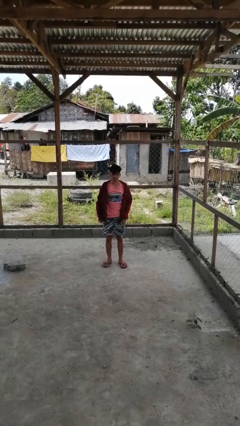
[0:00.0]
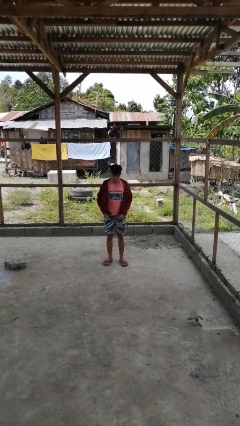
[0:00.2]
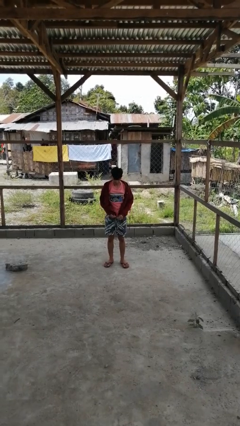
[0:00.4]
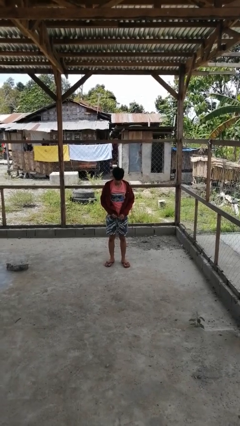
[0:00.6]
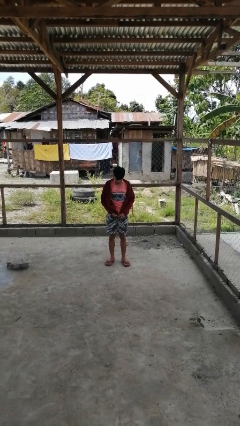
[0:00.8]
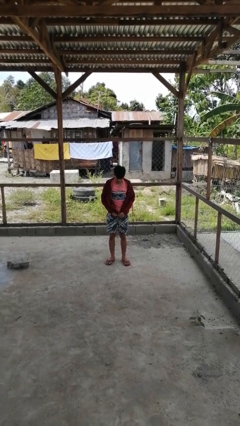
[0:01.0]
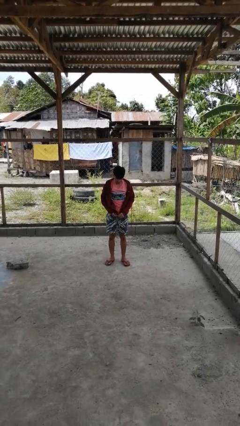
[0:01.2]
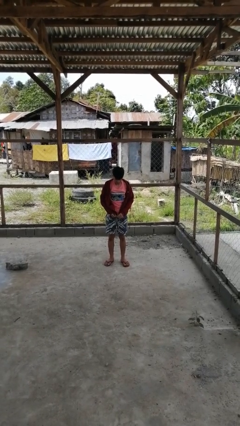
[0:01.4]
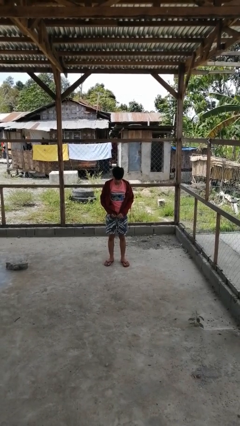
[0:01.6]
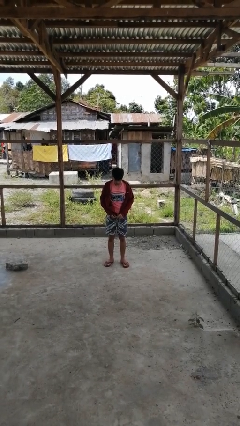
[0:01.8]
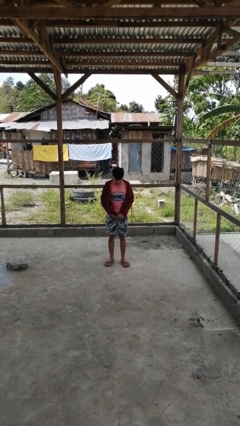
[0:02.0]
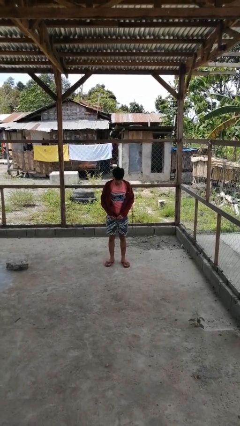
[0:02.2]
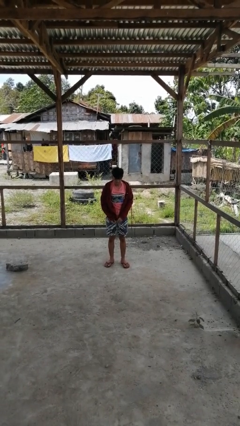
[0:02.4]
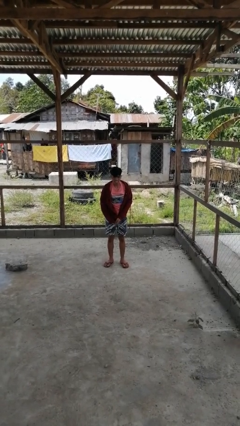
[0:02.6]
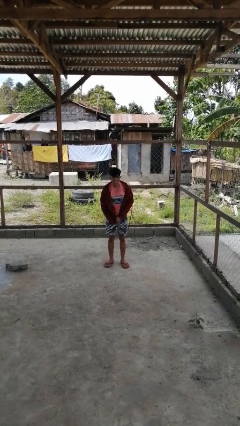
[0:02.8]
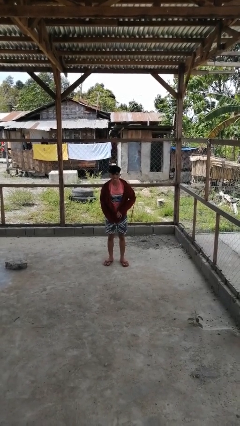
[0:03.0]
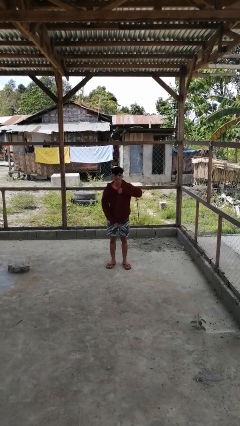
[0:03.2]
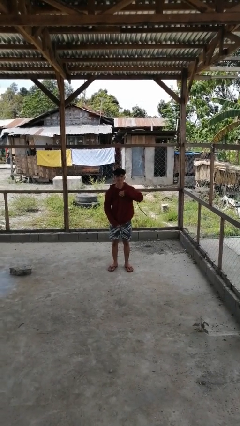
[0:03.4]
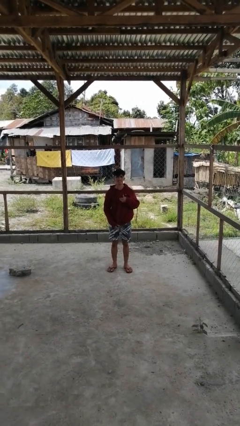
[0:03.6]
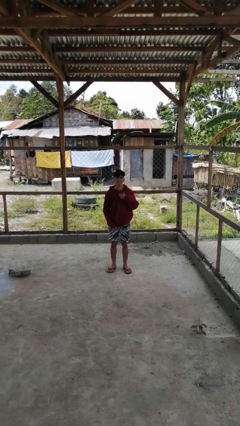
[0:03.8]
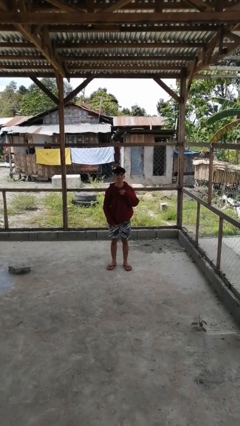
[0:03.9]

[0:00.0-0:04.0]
person zips up jacket

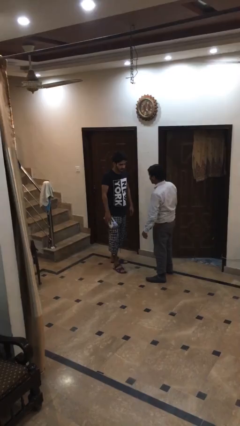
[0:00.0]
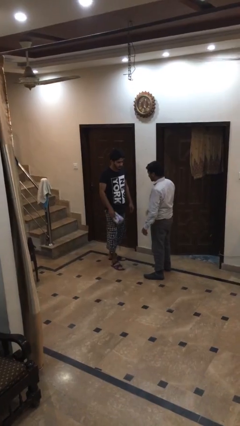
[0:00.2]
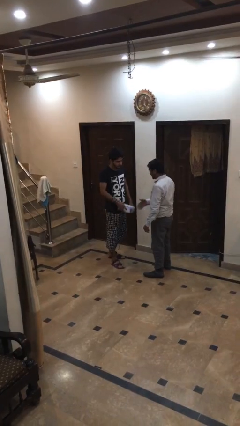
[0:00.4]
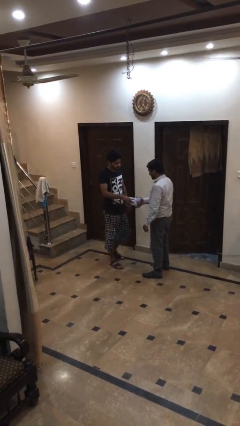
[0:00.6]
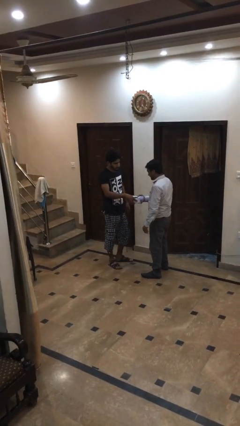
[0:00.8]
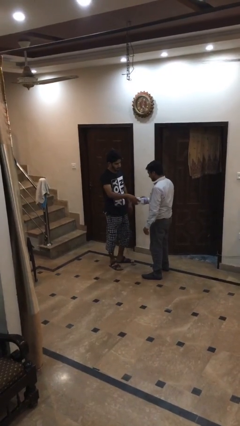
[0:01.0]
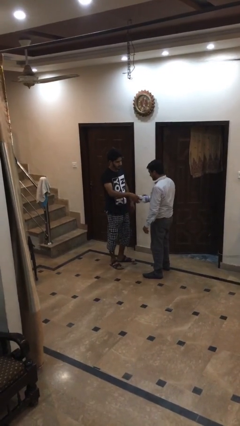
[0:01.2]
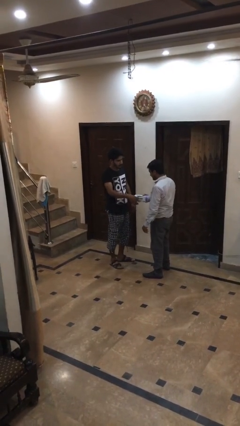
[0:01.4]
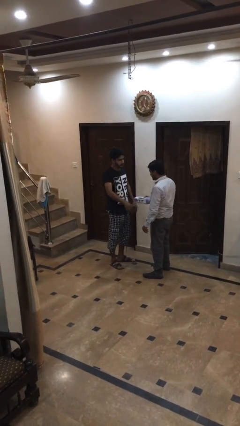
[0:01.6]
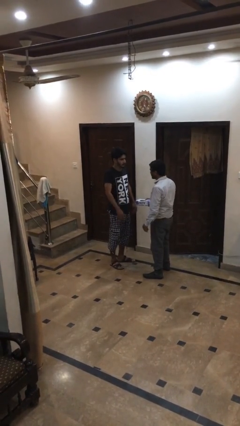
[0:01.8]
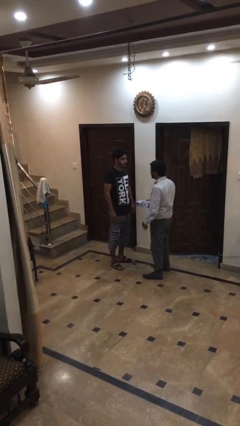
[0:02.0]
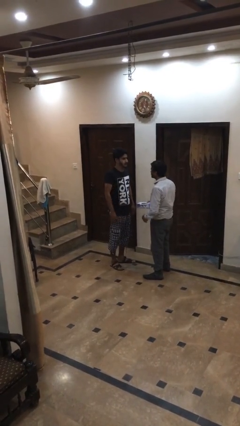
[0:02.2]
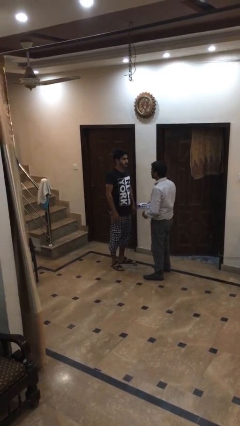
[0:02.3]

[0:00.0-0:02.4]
person transfers object to person

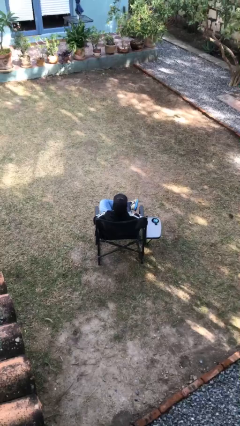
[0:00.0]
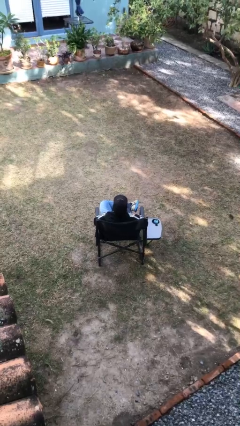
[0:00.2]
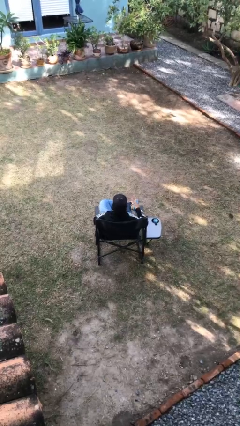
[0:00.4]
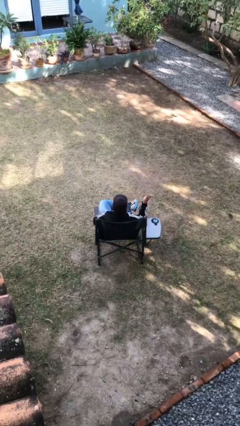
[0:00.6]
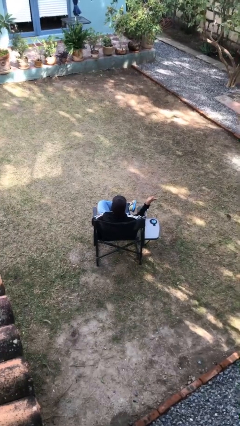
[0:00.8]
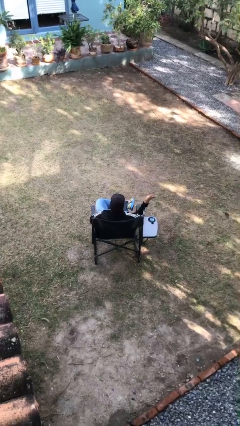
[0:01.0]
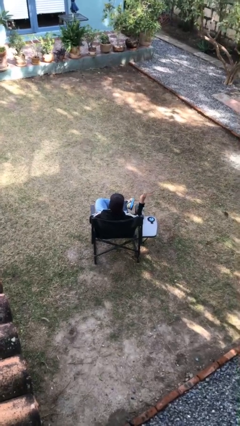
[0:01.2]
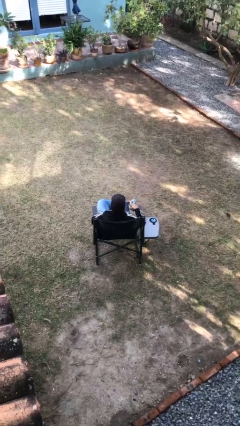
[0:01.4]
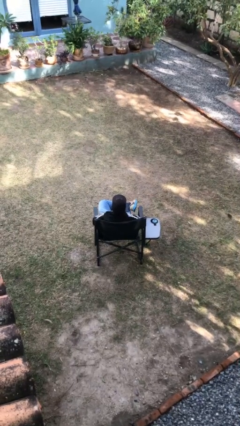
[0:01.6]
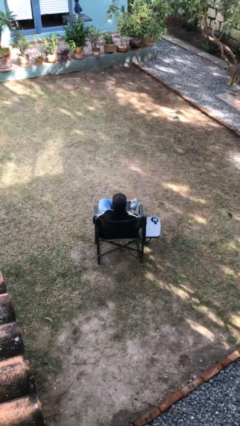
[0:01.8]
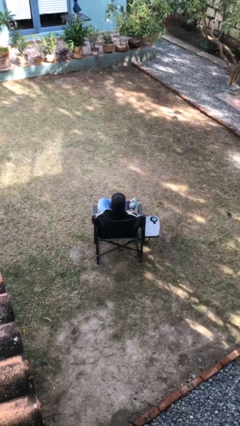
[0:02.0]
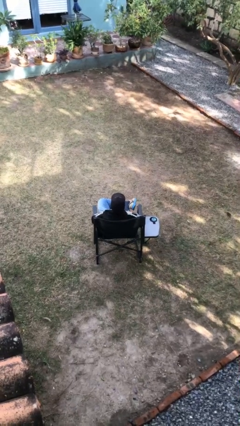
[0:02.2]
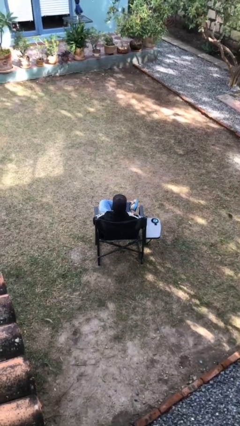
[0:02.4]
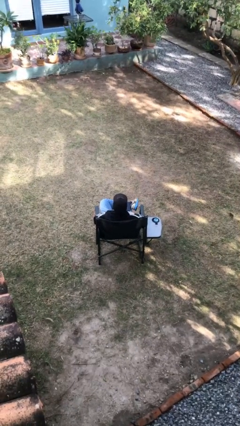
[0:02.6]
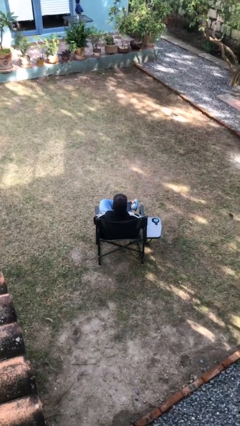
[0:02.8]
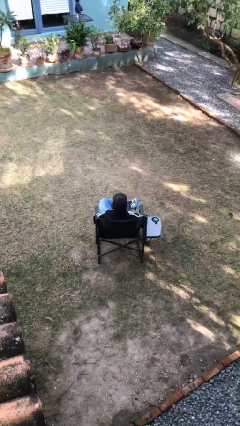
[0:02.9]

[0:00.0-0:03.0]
person gestures number three

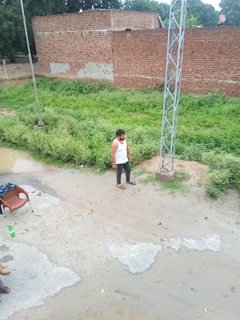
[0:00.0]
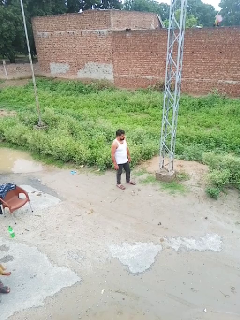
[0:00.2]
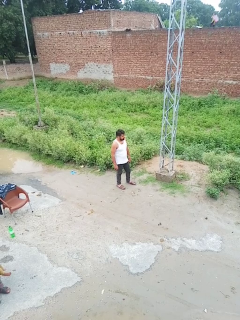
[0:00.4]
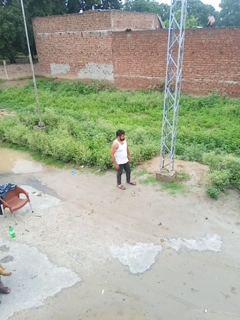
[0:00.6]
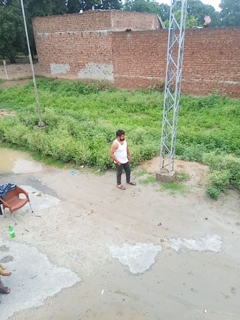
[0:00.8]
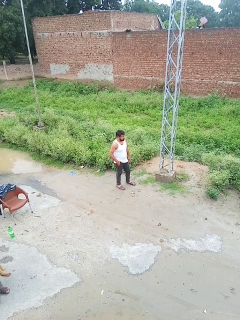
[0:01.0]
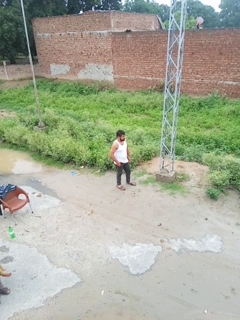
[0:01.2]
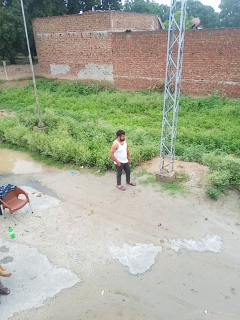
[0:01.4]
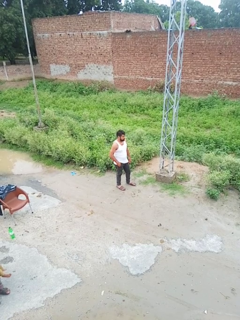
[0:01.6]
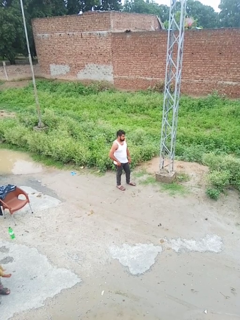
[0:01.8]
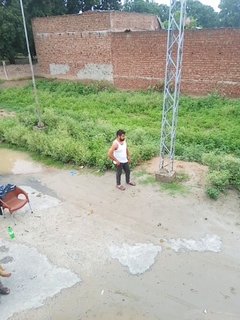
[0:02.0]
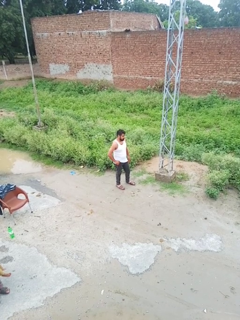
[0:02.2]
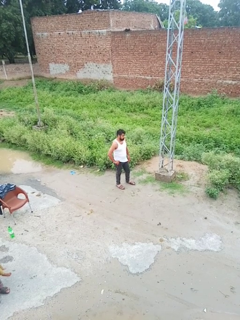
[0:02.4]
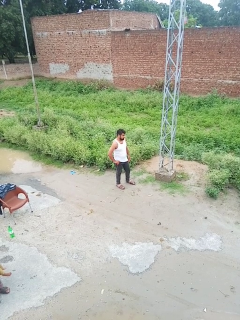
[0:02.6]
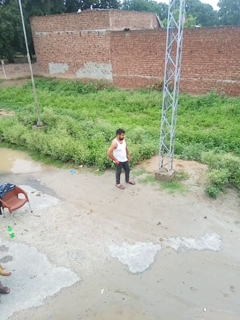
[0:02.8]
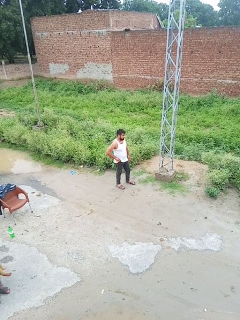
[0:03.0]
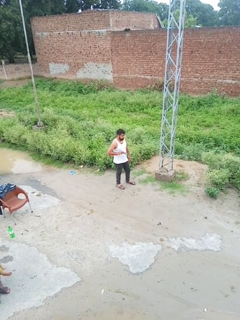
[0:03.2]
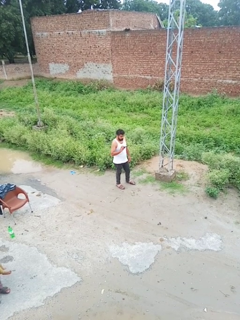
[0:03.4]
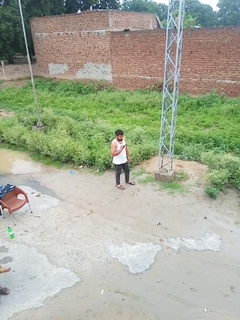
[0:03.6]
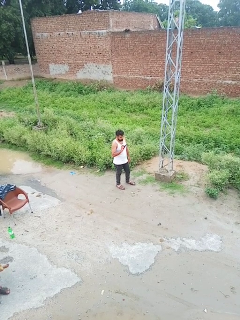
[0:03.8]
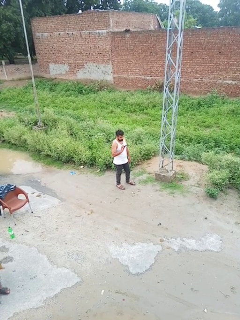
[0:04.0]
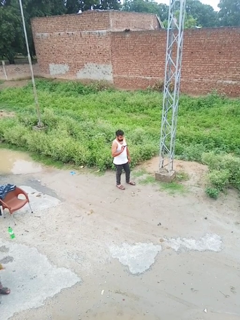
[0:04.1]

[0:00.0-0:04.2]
person takes phone from pocket

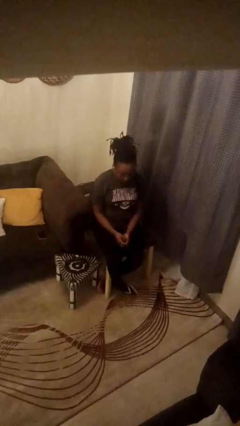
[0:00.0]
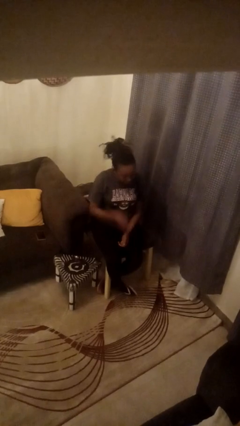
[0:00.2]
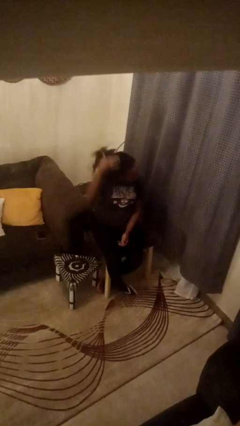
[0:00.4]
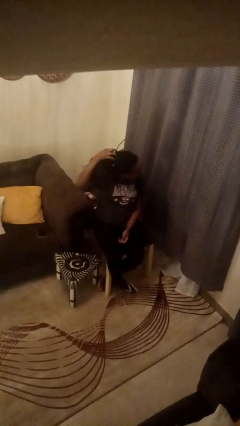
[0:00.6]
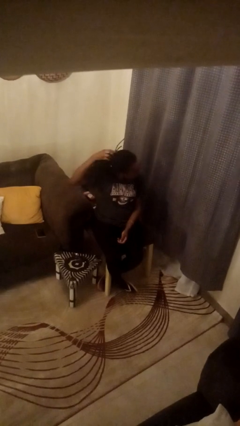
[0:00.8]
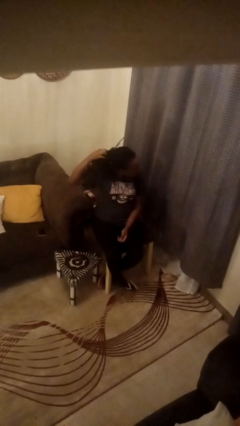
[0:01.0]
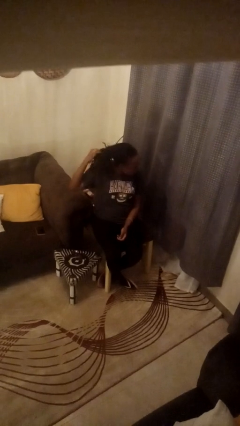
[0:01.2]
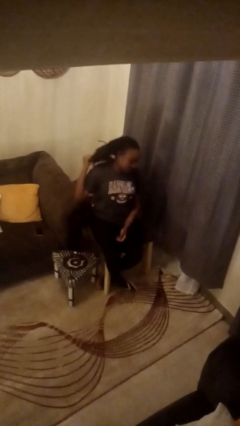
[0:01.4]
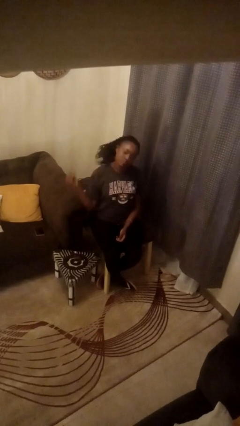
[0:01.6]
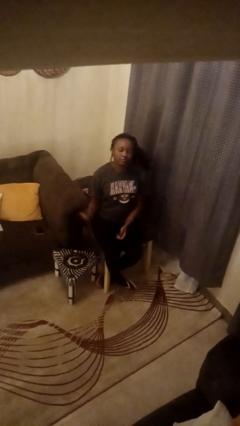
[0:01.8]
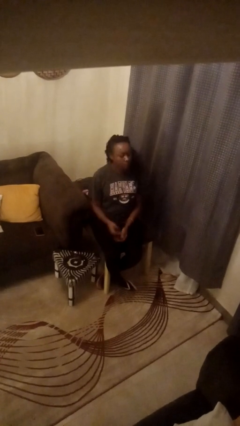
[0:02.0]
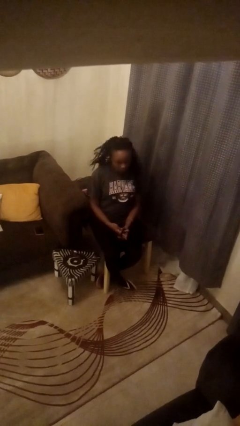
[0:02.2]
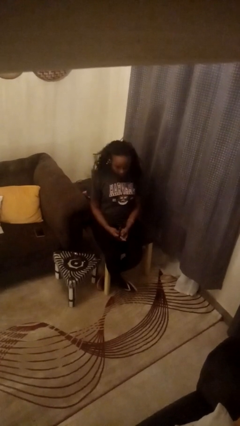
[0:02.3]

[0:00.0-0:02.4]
person takes off hairtie

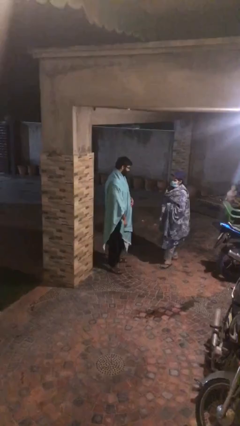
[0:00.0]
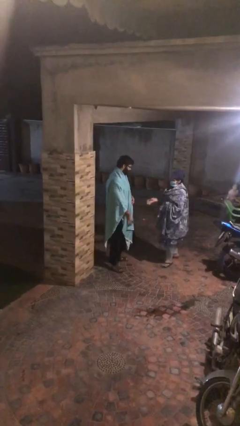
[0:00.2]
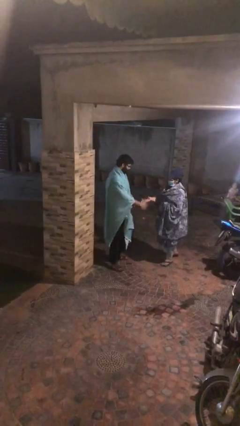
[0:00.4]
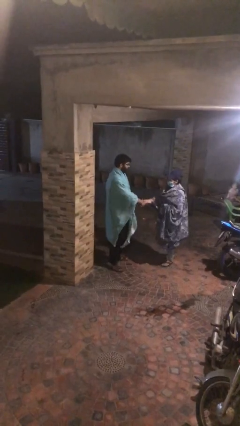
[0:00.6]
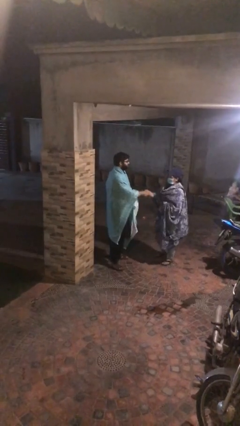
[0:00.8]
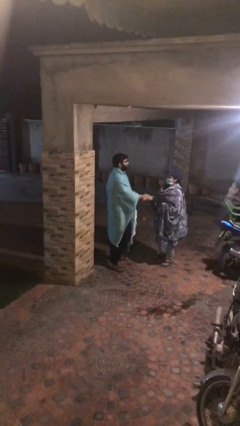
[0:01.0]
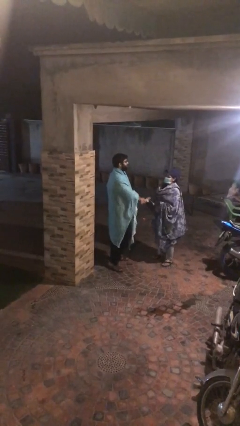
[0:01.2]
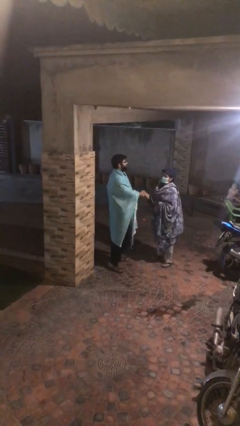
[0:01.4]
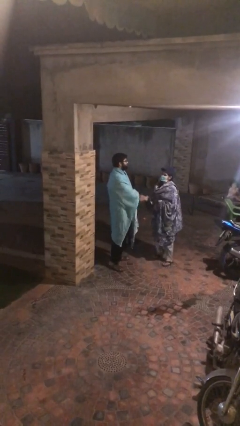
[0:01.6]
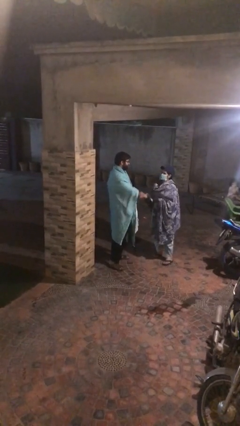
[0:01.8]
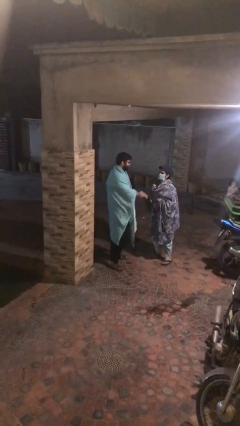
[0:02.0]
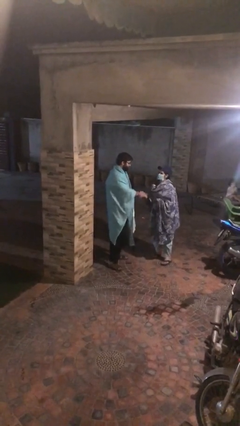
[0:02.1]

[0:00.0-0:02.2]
person shakes hand

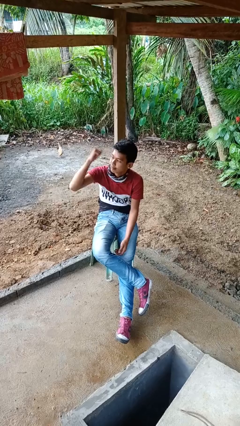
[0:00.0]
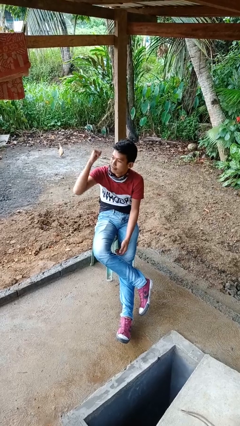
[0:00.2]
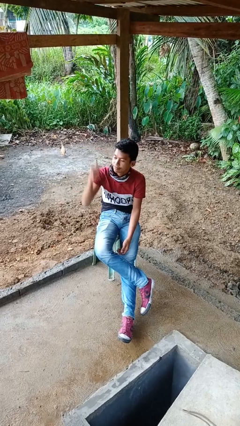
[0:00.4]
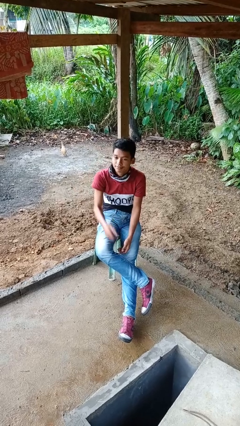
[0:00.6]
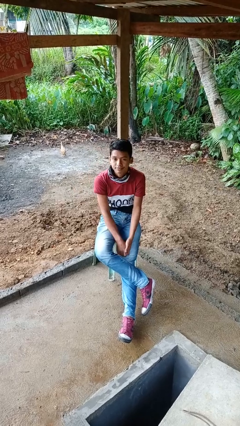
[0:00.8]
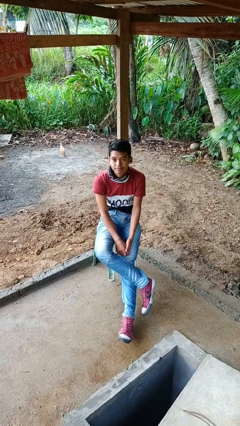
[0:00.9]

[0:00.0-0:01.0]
person gestures behind me
